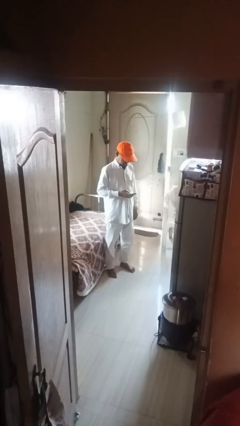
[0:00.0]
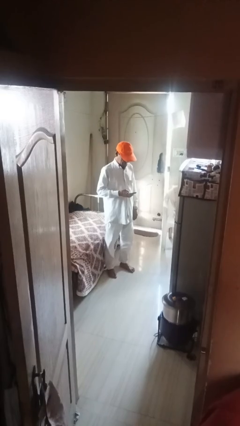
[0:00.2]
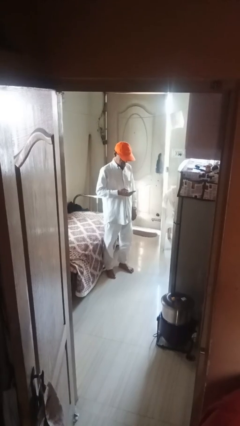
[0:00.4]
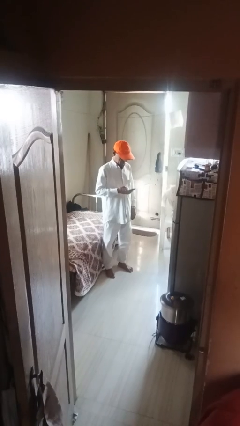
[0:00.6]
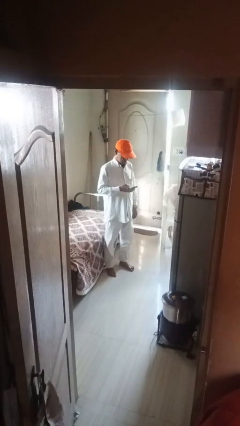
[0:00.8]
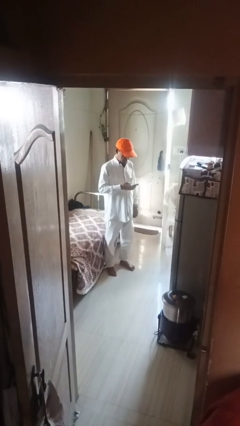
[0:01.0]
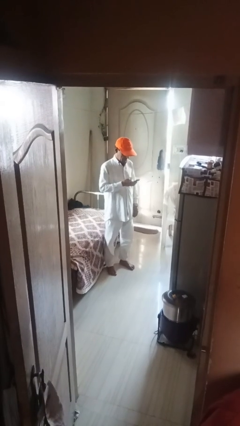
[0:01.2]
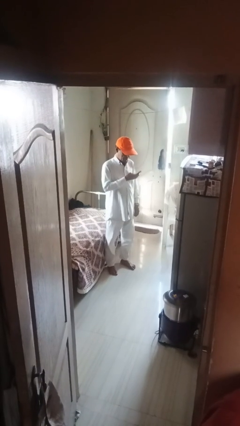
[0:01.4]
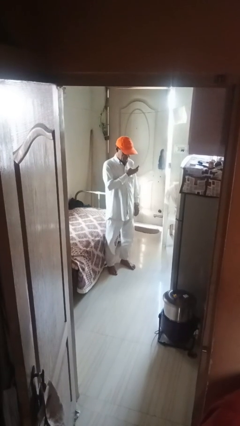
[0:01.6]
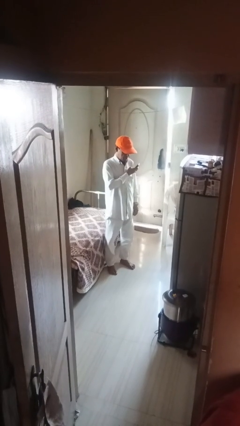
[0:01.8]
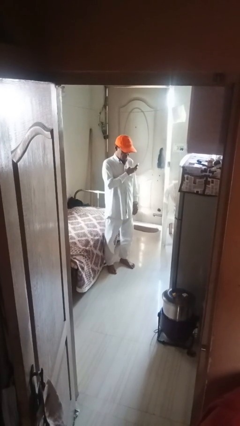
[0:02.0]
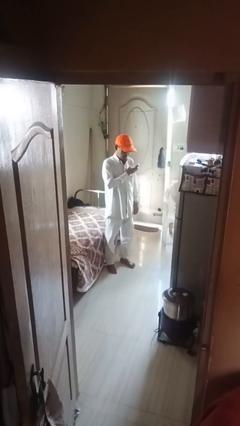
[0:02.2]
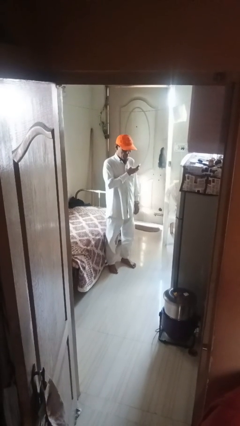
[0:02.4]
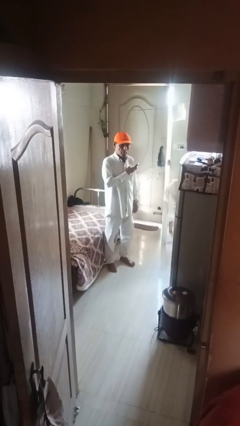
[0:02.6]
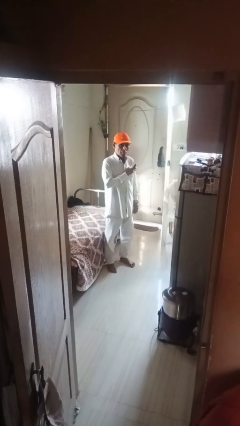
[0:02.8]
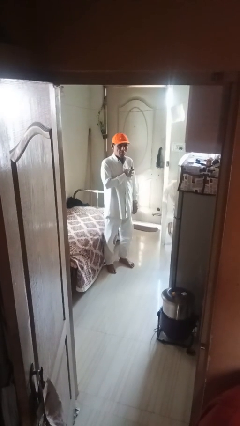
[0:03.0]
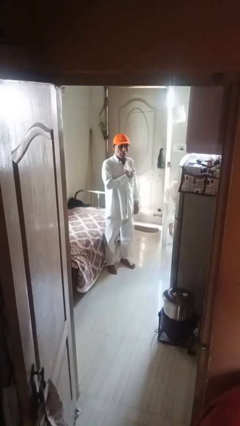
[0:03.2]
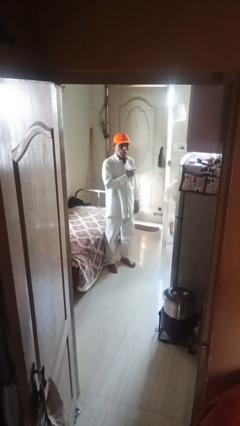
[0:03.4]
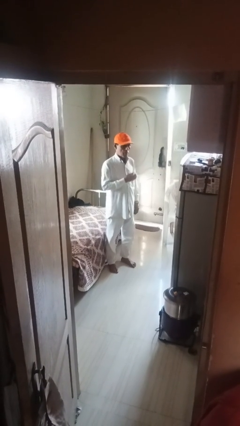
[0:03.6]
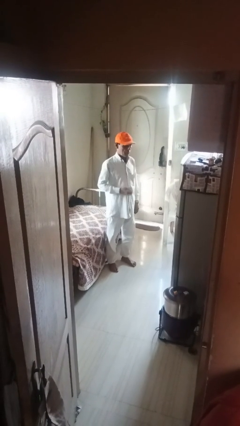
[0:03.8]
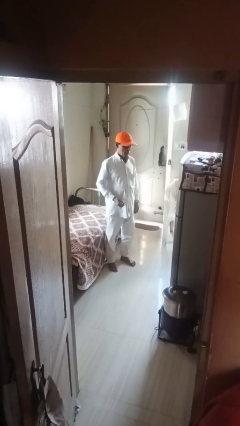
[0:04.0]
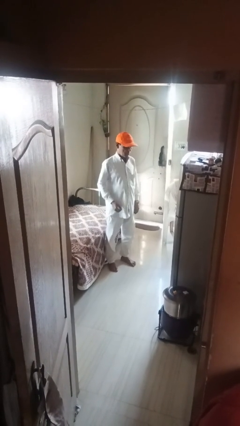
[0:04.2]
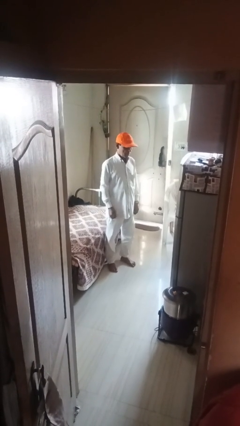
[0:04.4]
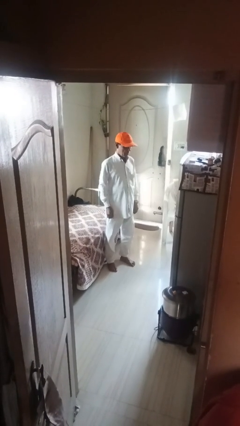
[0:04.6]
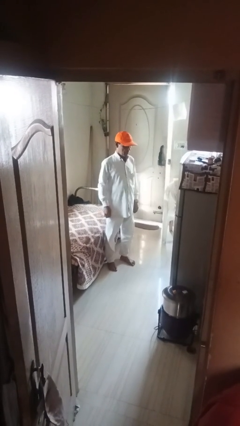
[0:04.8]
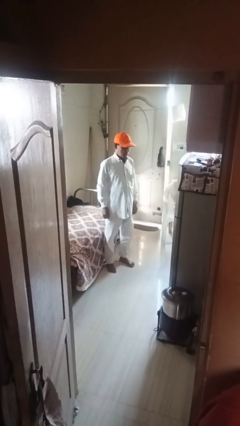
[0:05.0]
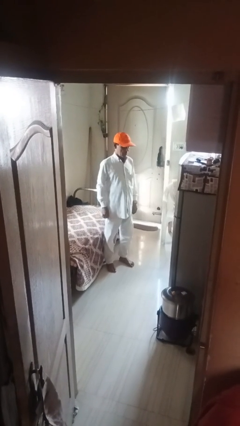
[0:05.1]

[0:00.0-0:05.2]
person puts phone into pocket

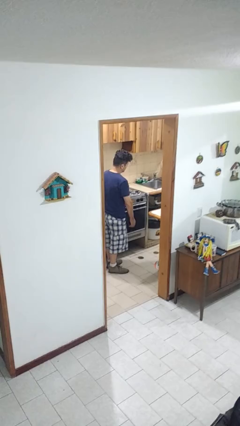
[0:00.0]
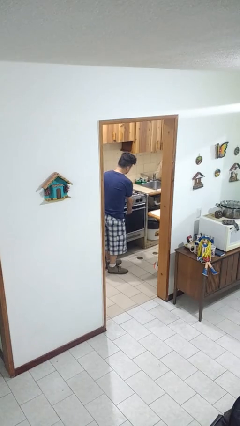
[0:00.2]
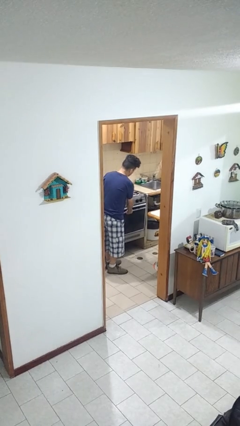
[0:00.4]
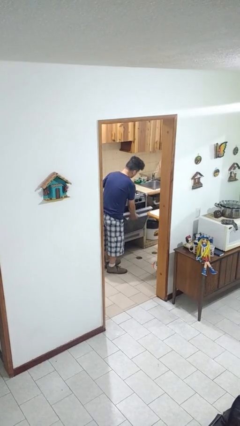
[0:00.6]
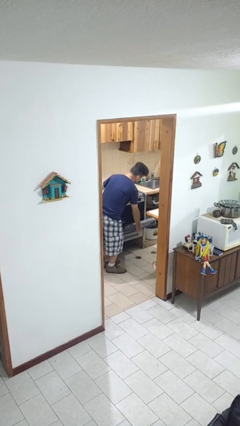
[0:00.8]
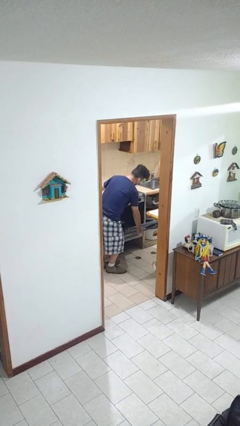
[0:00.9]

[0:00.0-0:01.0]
person opens oven door

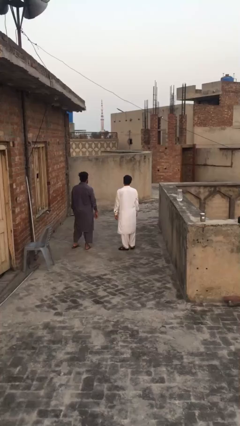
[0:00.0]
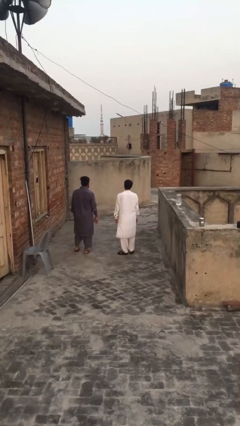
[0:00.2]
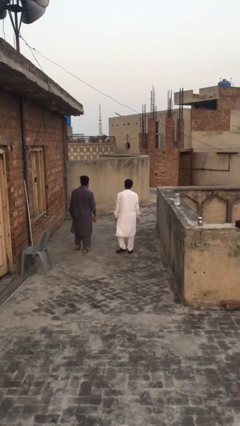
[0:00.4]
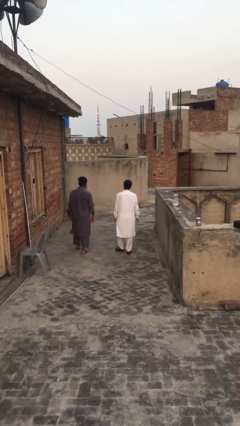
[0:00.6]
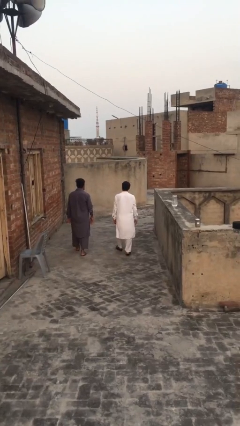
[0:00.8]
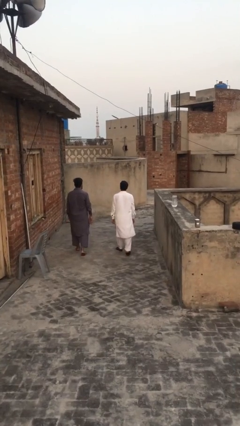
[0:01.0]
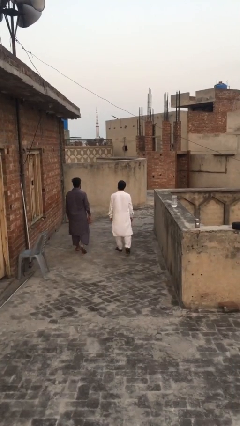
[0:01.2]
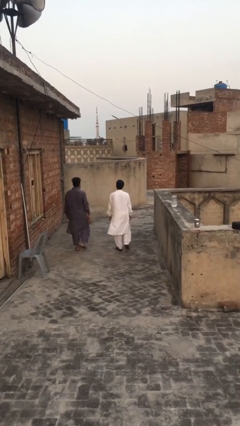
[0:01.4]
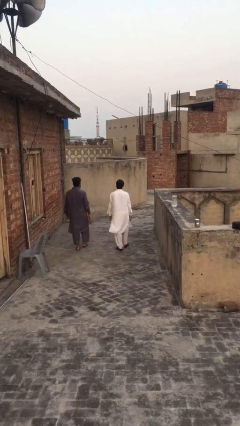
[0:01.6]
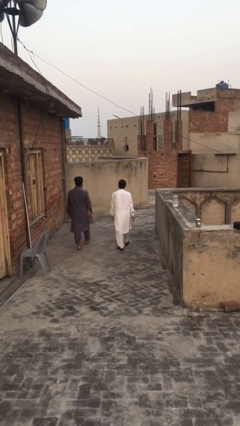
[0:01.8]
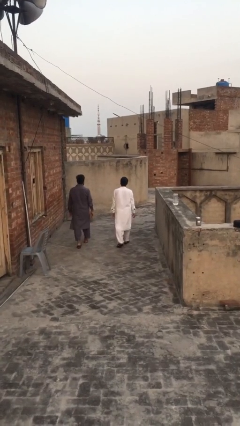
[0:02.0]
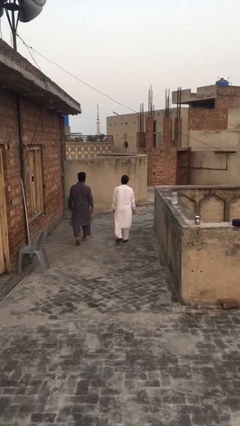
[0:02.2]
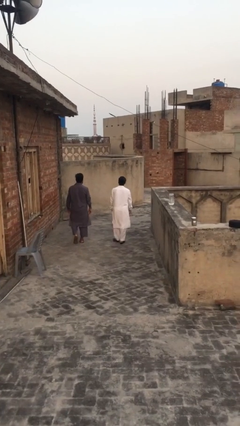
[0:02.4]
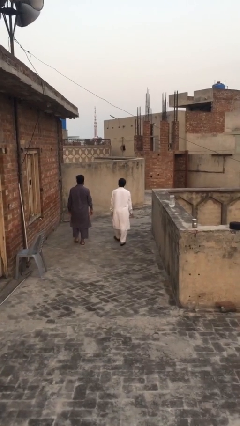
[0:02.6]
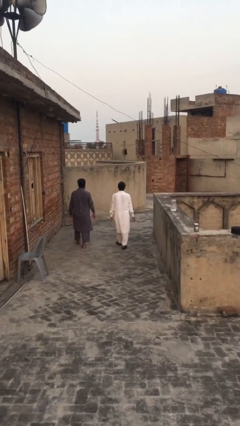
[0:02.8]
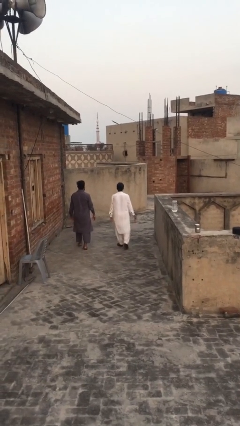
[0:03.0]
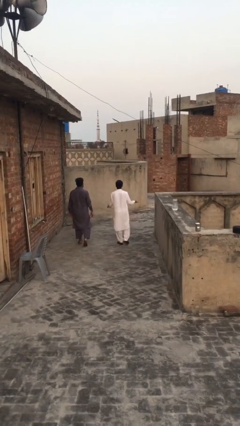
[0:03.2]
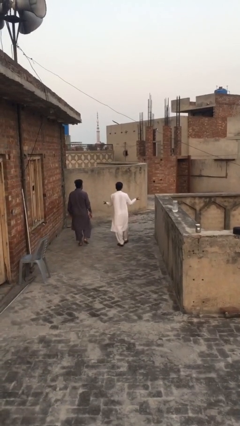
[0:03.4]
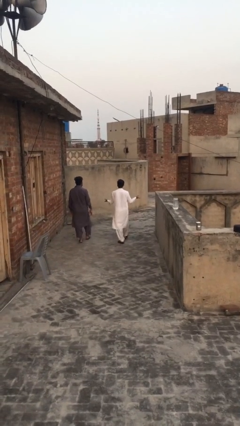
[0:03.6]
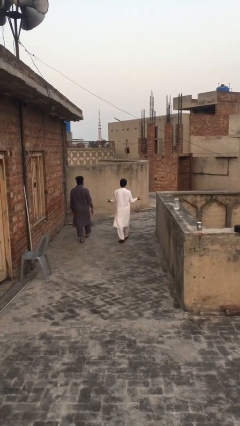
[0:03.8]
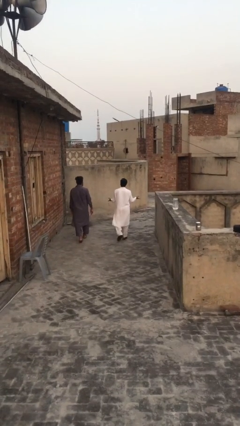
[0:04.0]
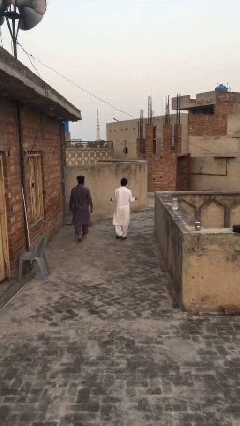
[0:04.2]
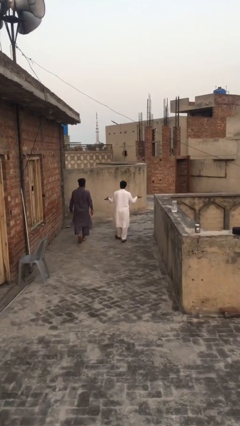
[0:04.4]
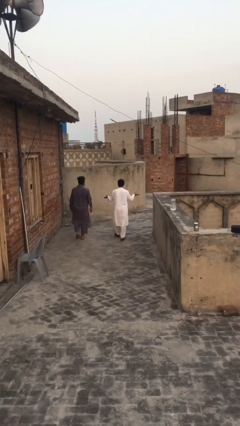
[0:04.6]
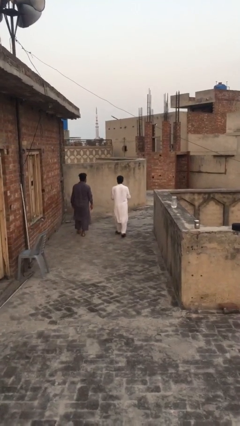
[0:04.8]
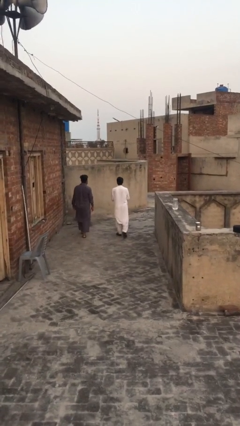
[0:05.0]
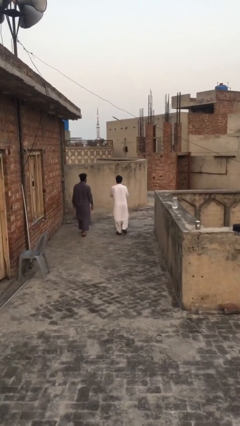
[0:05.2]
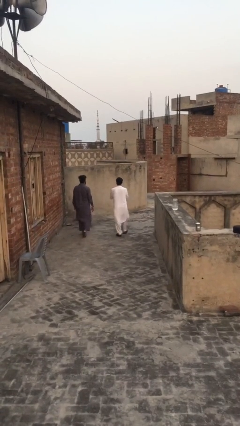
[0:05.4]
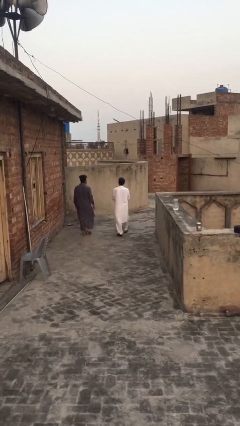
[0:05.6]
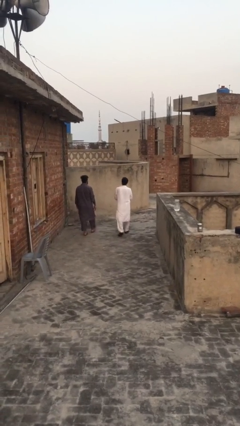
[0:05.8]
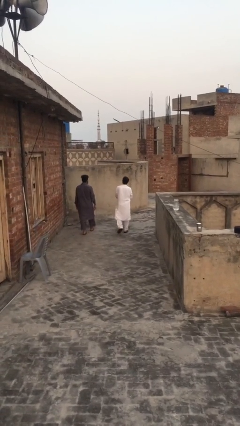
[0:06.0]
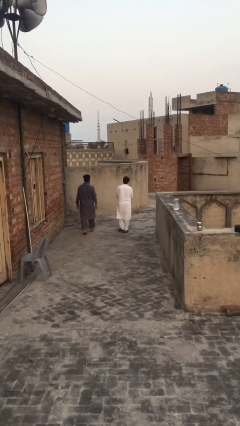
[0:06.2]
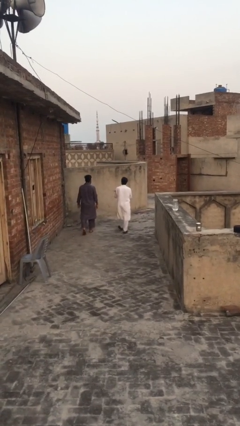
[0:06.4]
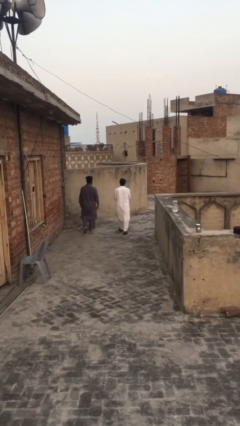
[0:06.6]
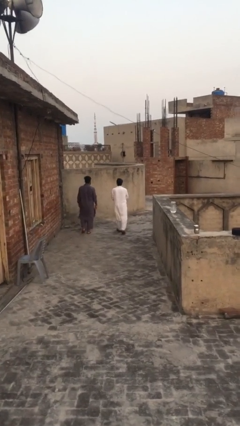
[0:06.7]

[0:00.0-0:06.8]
person talks to person

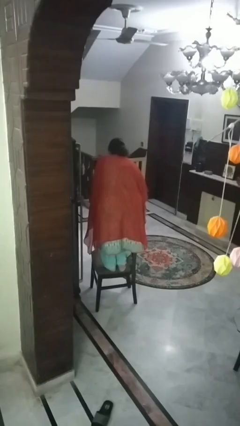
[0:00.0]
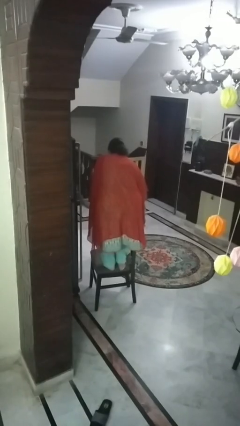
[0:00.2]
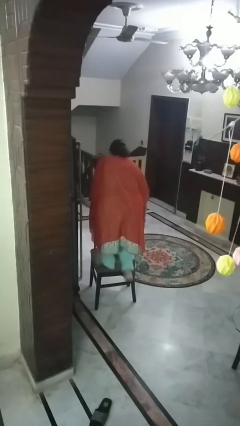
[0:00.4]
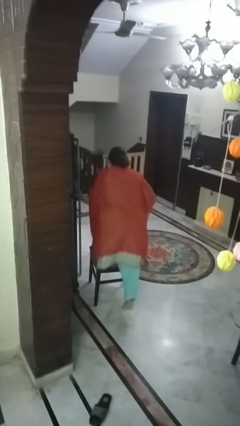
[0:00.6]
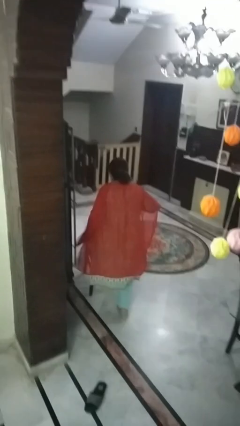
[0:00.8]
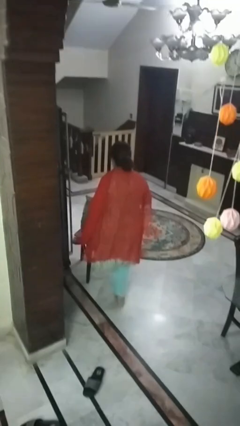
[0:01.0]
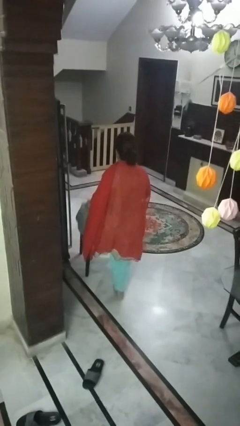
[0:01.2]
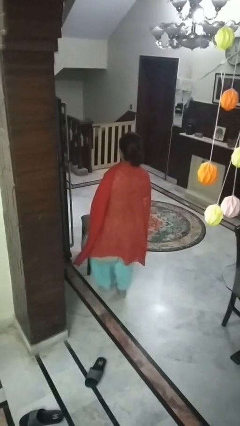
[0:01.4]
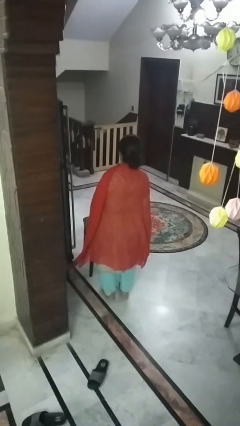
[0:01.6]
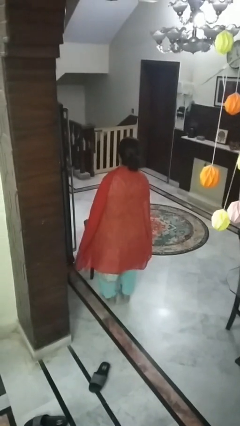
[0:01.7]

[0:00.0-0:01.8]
person climbs off chair

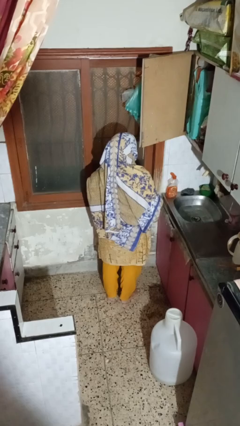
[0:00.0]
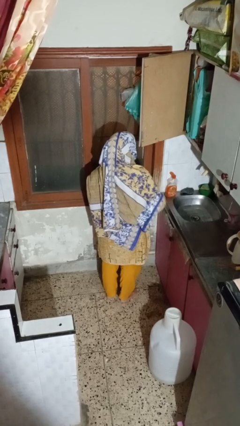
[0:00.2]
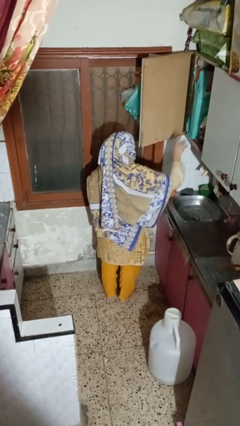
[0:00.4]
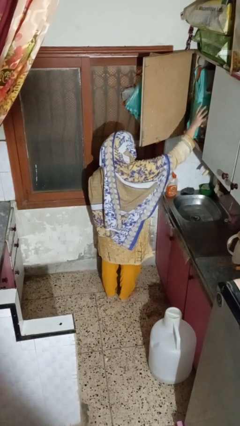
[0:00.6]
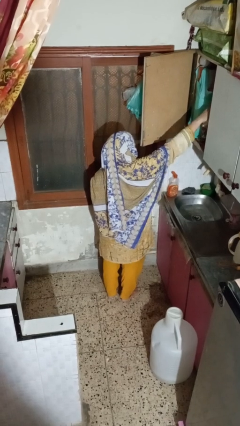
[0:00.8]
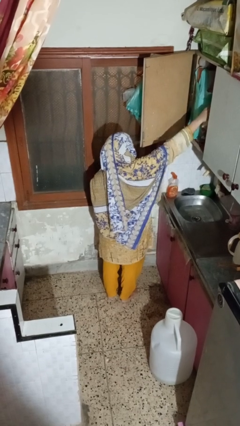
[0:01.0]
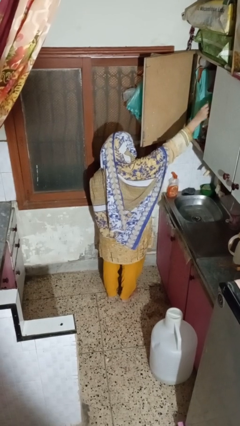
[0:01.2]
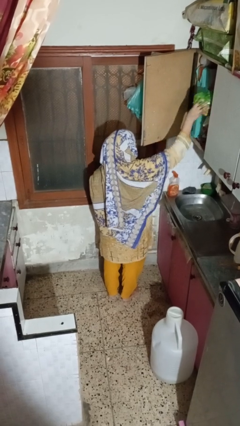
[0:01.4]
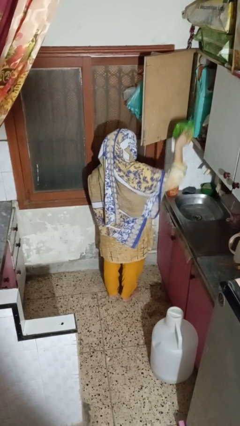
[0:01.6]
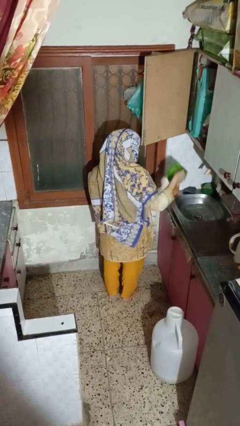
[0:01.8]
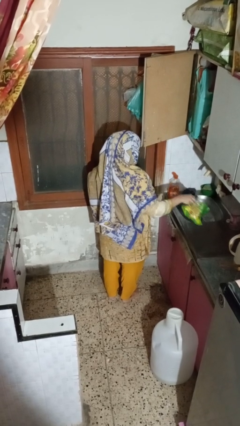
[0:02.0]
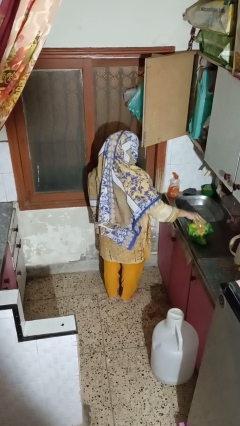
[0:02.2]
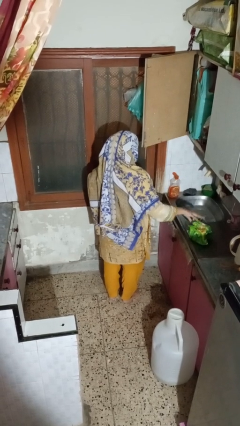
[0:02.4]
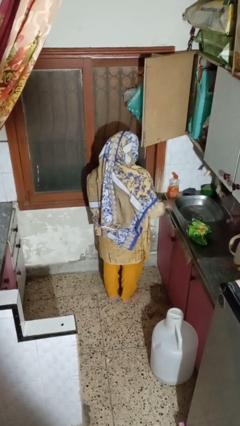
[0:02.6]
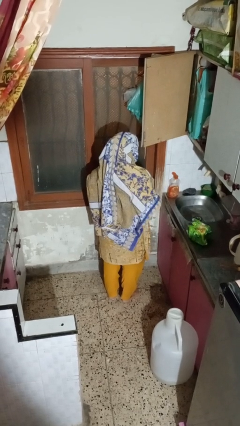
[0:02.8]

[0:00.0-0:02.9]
person takes object from cabinet
